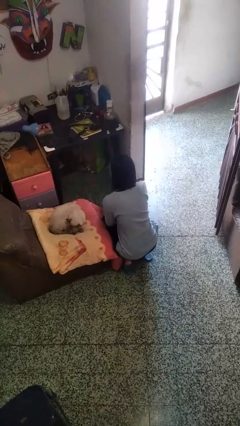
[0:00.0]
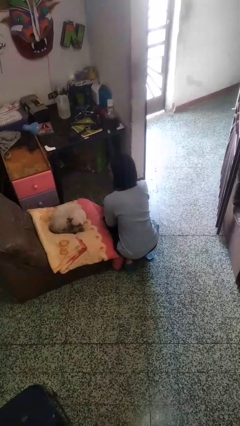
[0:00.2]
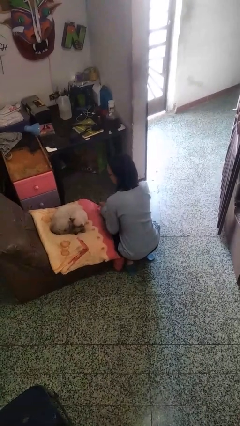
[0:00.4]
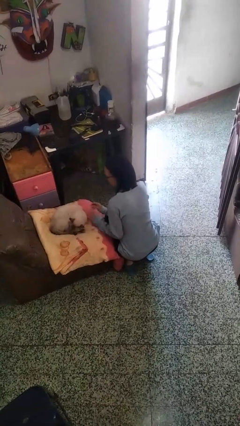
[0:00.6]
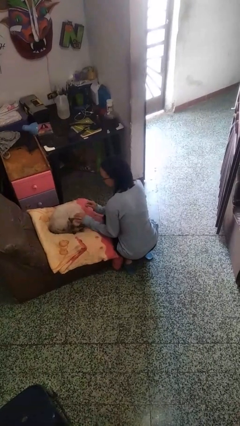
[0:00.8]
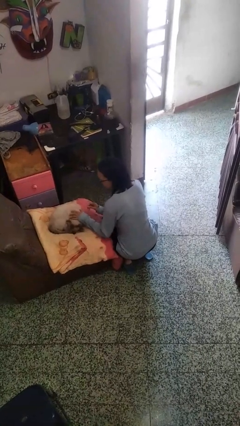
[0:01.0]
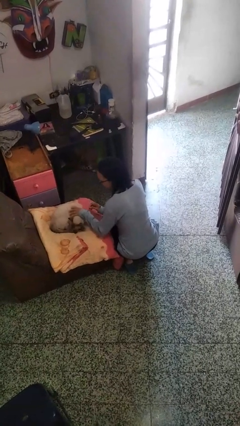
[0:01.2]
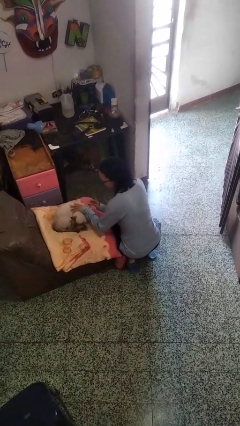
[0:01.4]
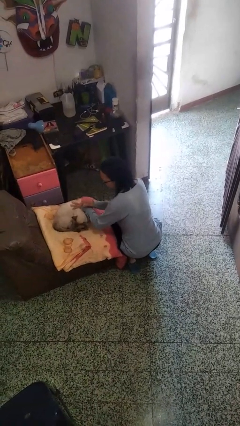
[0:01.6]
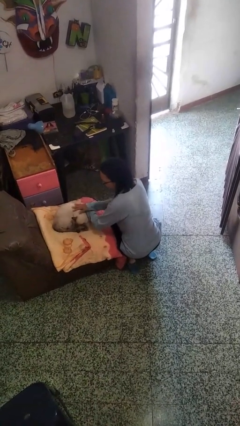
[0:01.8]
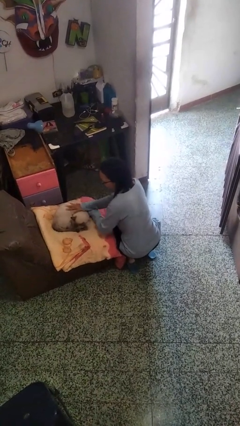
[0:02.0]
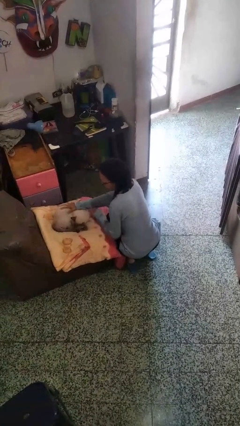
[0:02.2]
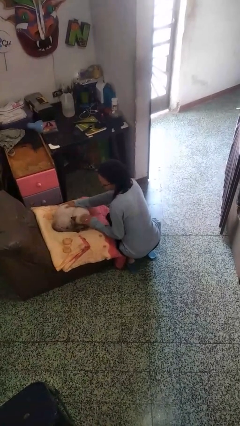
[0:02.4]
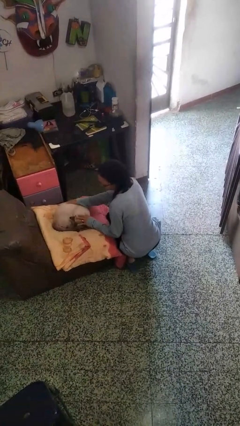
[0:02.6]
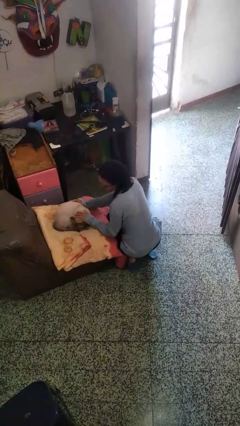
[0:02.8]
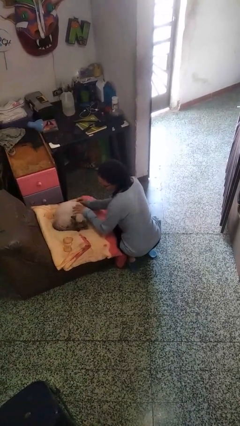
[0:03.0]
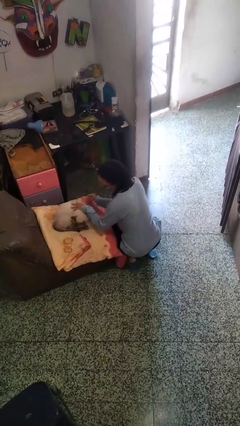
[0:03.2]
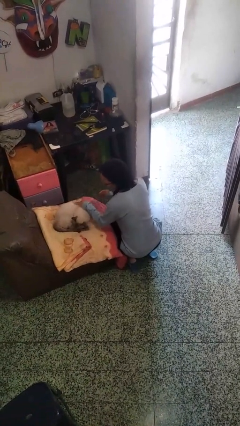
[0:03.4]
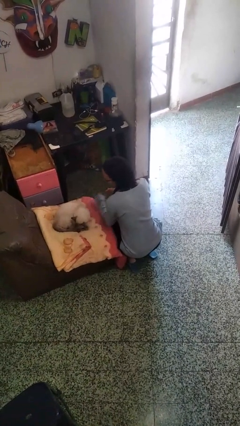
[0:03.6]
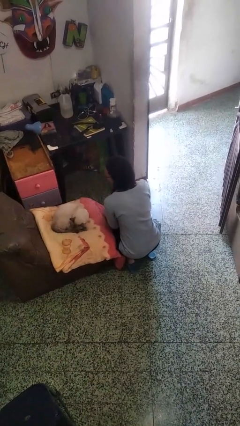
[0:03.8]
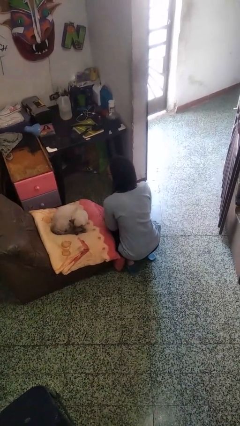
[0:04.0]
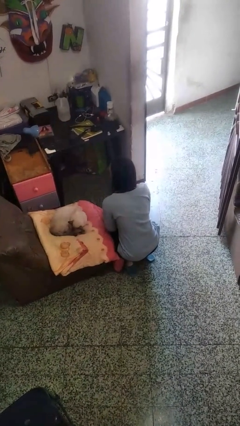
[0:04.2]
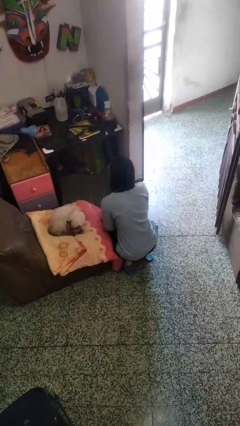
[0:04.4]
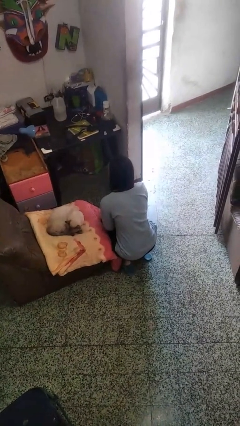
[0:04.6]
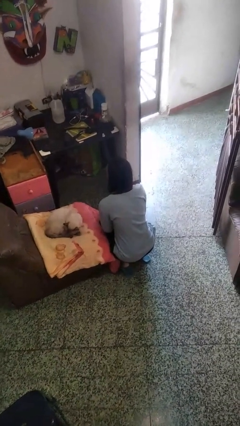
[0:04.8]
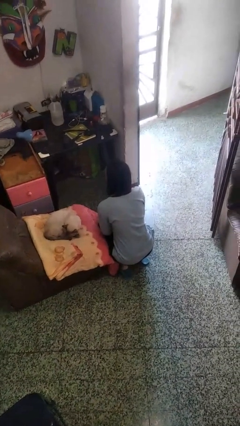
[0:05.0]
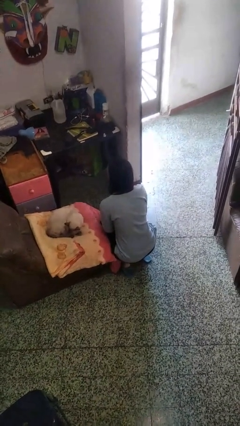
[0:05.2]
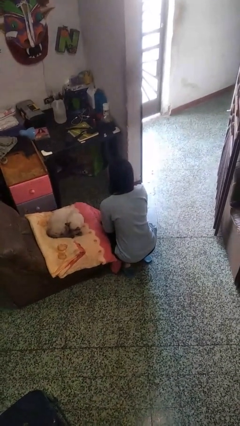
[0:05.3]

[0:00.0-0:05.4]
person pets cat

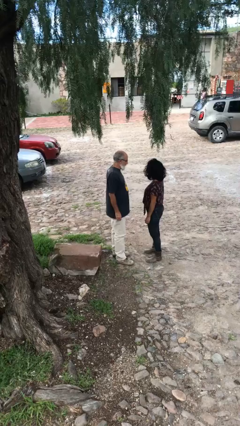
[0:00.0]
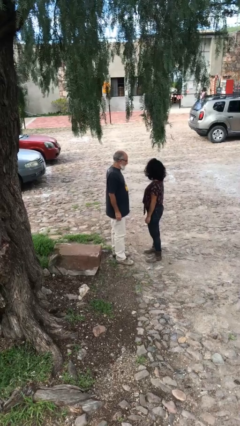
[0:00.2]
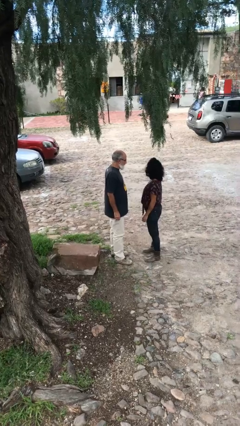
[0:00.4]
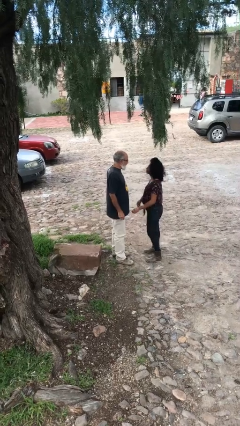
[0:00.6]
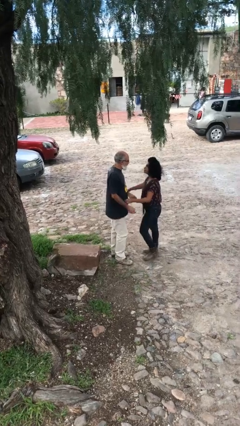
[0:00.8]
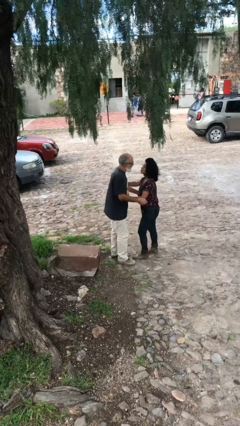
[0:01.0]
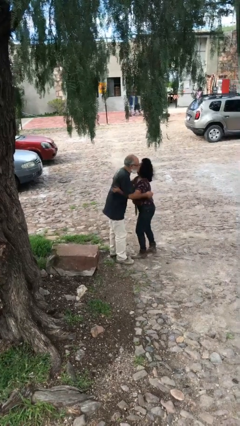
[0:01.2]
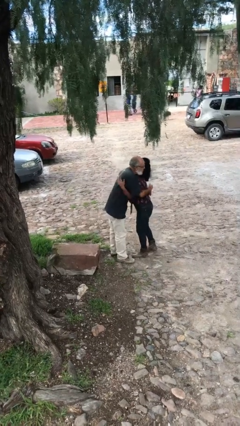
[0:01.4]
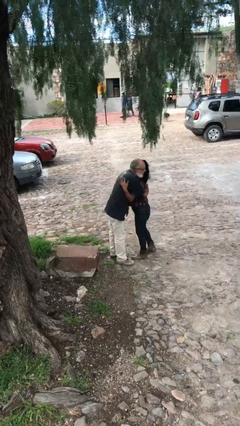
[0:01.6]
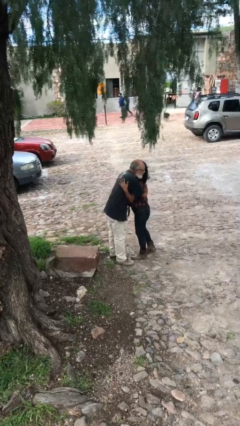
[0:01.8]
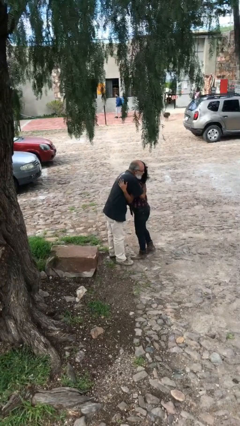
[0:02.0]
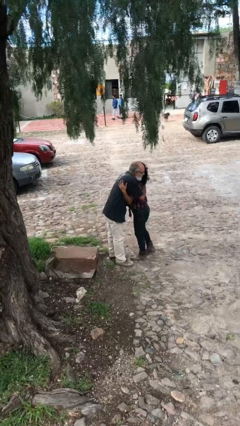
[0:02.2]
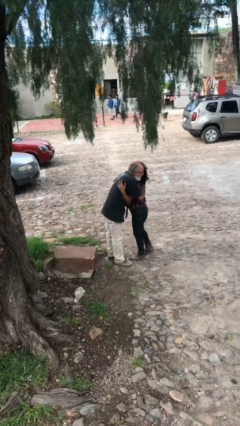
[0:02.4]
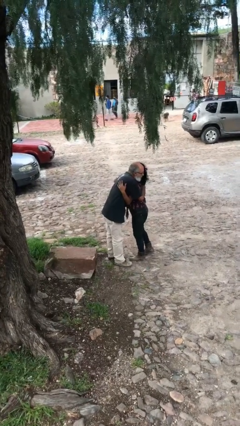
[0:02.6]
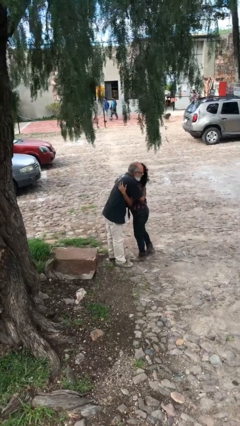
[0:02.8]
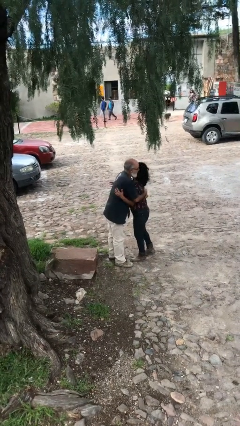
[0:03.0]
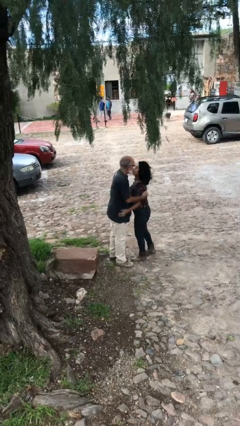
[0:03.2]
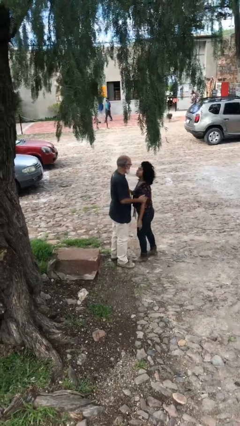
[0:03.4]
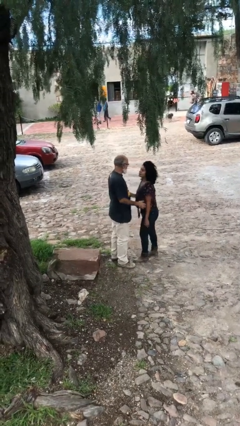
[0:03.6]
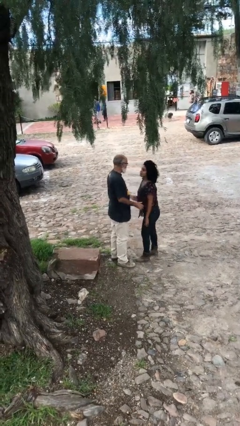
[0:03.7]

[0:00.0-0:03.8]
person embraces person

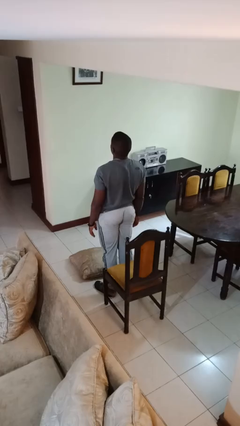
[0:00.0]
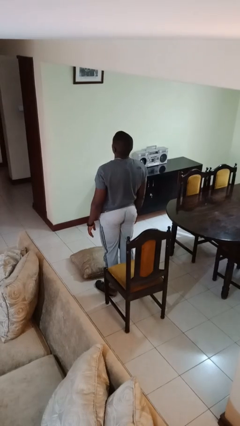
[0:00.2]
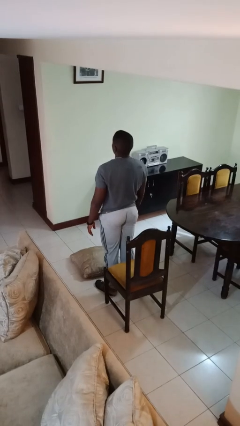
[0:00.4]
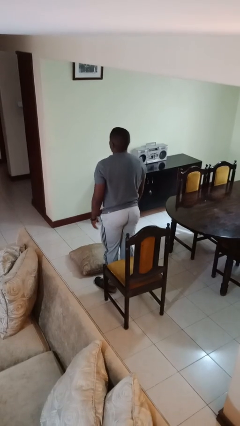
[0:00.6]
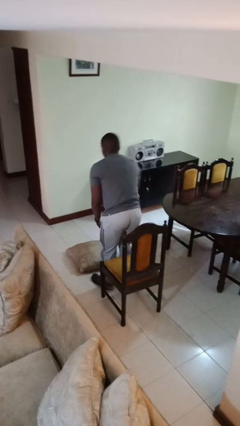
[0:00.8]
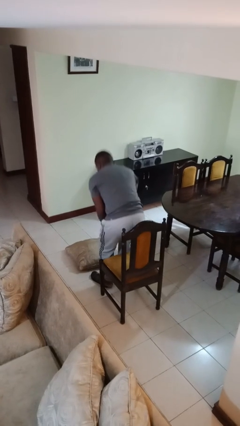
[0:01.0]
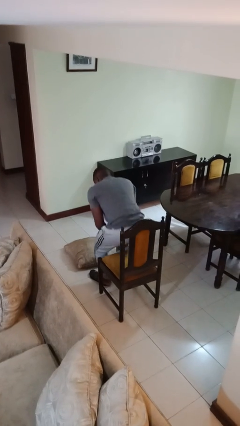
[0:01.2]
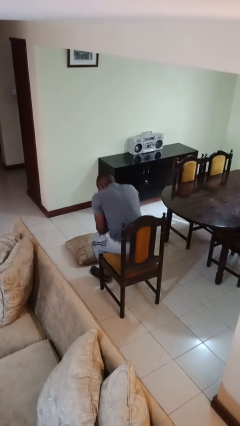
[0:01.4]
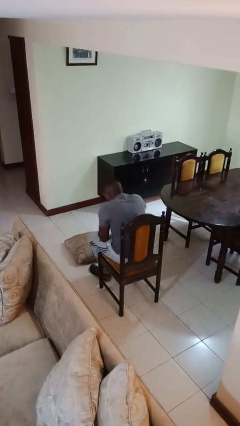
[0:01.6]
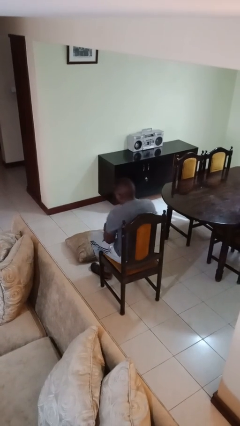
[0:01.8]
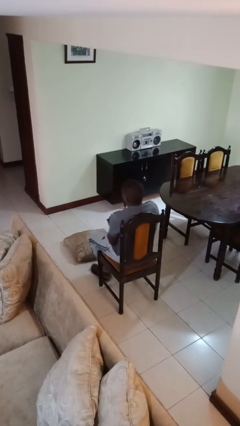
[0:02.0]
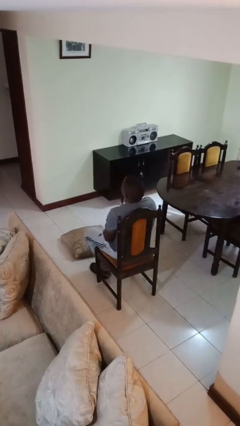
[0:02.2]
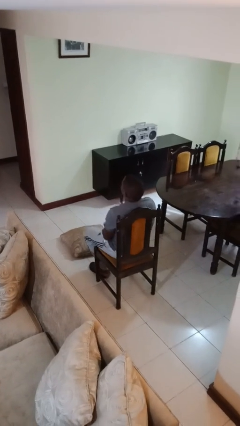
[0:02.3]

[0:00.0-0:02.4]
person sits down

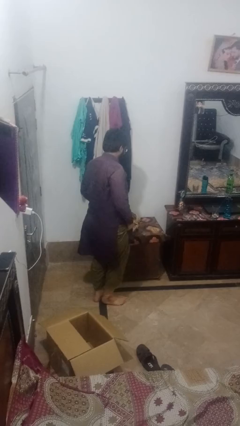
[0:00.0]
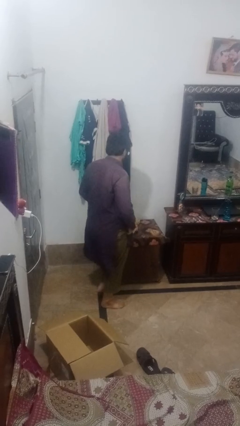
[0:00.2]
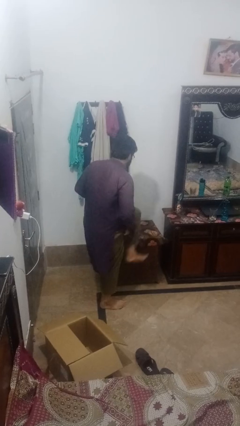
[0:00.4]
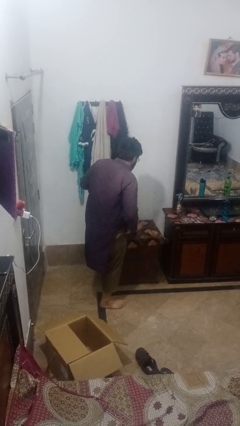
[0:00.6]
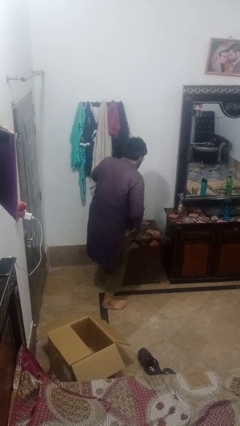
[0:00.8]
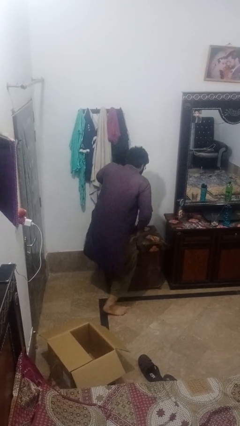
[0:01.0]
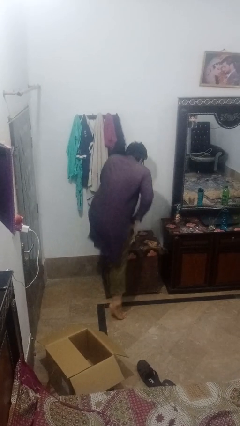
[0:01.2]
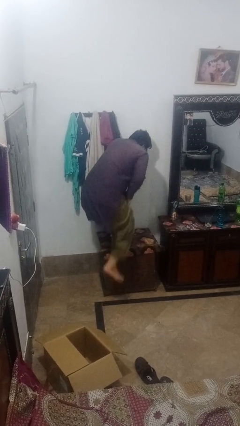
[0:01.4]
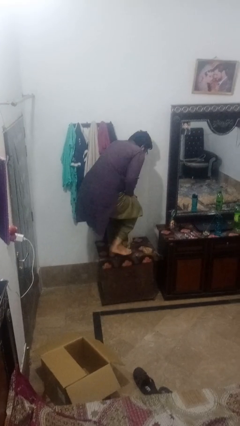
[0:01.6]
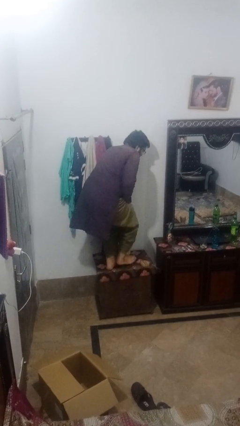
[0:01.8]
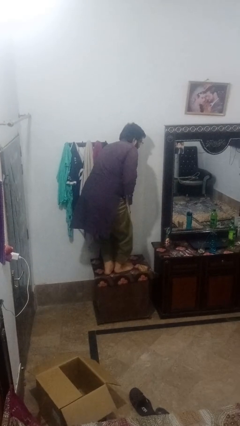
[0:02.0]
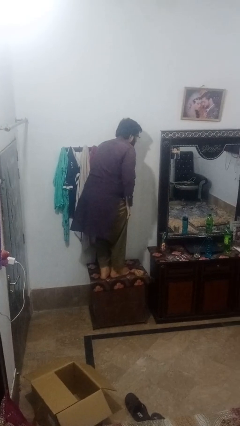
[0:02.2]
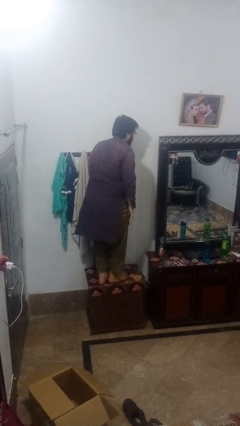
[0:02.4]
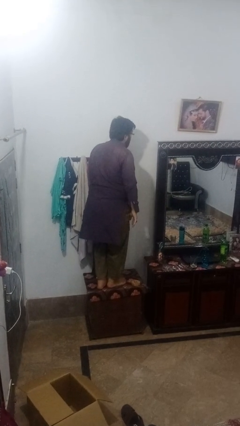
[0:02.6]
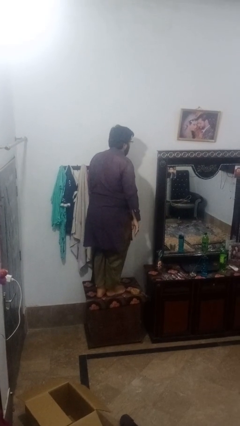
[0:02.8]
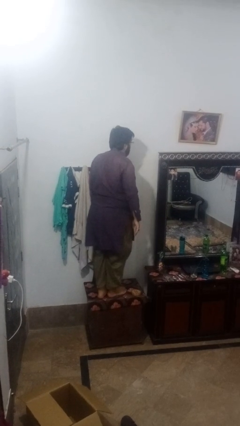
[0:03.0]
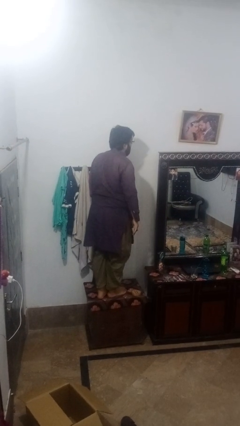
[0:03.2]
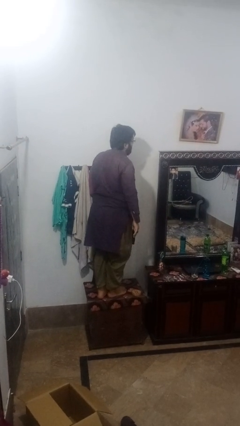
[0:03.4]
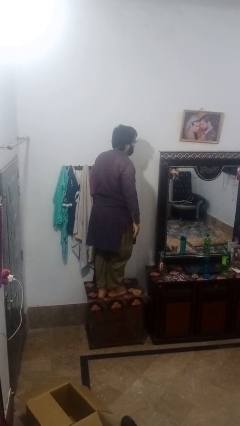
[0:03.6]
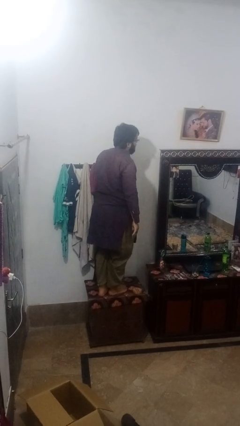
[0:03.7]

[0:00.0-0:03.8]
person climbs on table

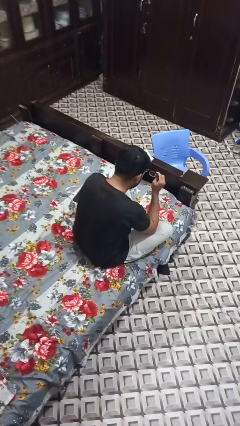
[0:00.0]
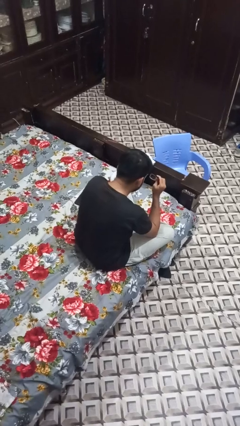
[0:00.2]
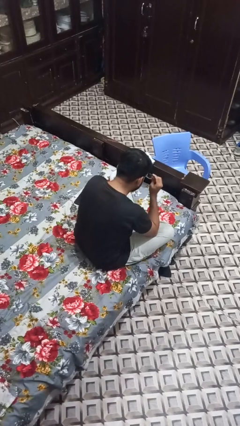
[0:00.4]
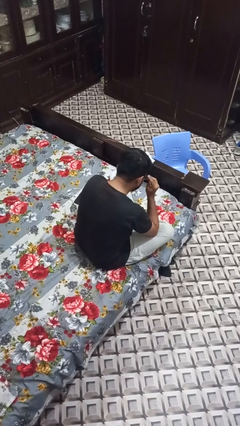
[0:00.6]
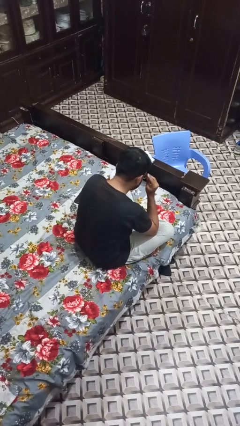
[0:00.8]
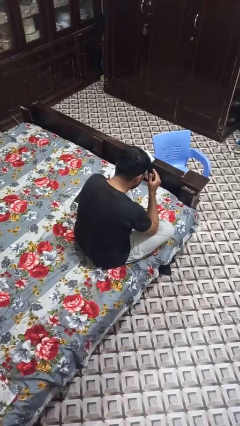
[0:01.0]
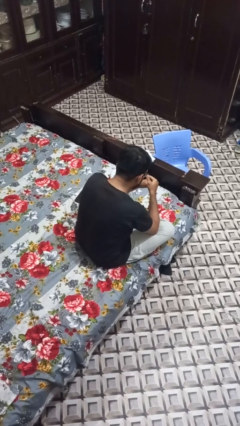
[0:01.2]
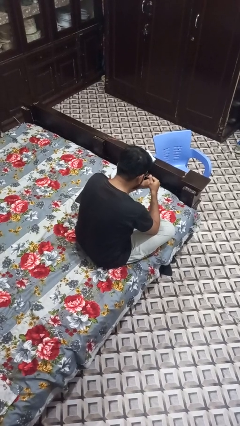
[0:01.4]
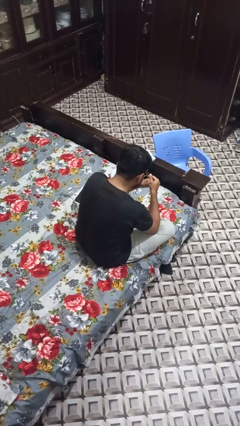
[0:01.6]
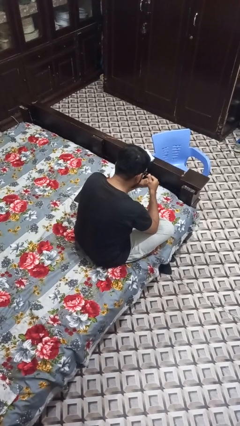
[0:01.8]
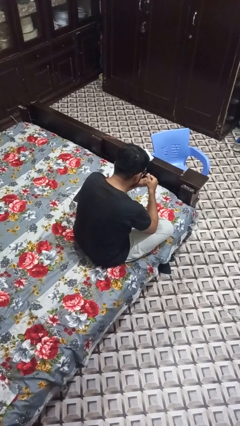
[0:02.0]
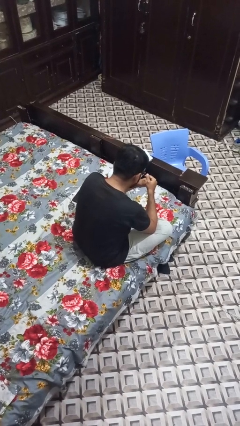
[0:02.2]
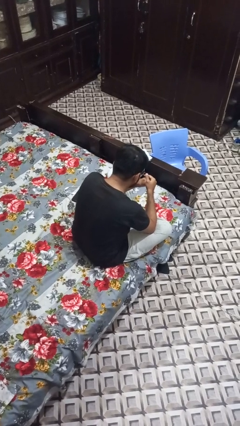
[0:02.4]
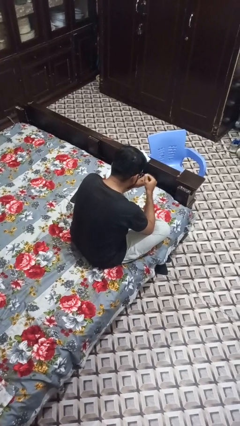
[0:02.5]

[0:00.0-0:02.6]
person puts on glasses
